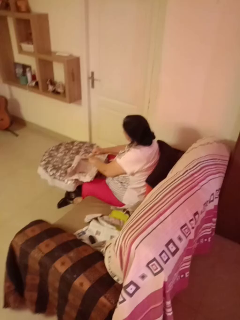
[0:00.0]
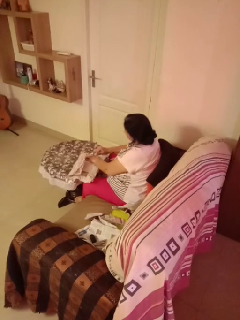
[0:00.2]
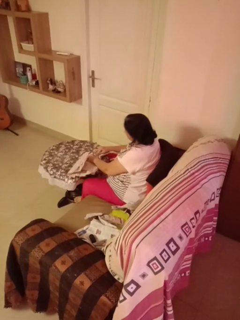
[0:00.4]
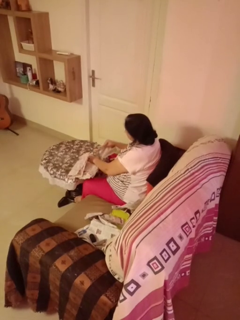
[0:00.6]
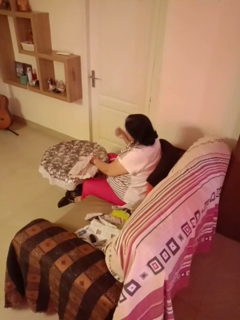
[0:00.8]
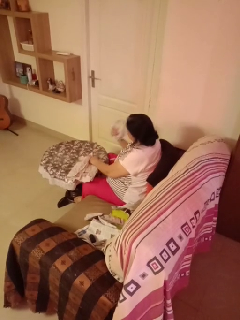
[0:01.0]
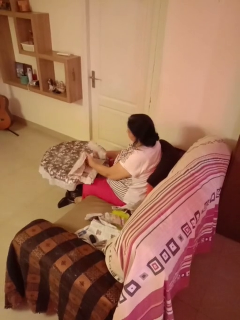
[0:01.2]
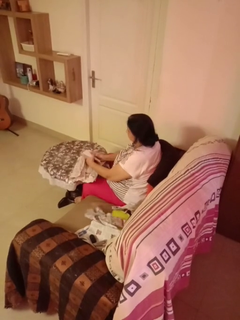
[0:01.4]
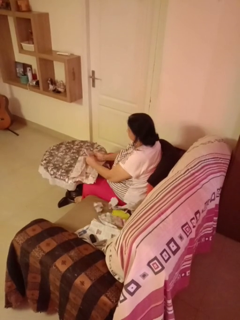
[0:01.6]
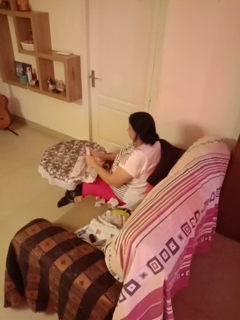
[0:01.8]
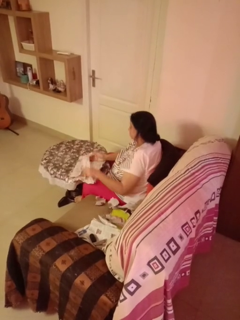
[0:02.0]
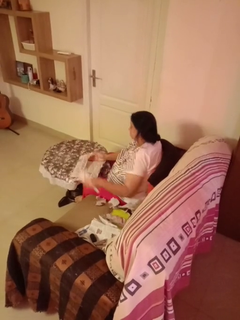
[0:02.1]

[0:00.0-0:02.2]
person tears paper

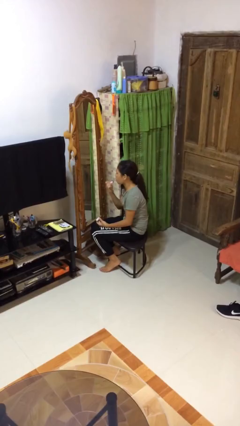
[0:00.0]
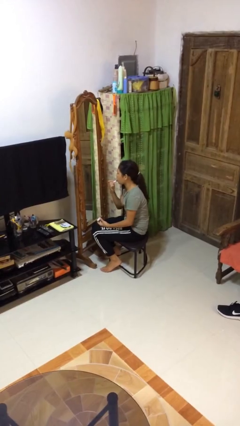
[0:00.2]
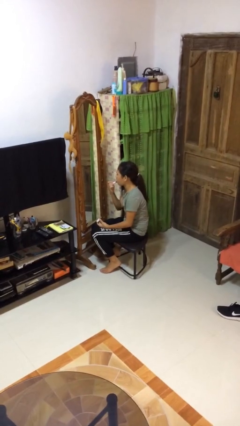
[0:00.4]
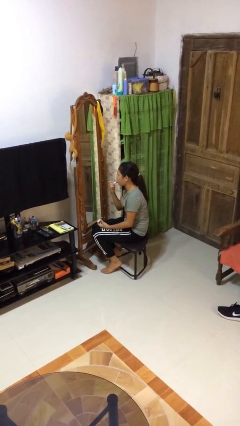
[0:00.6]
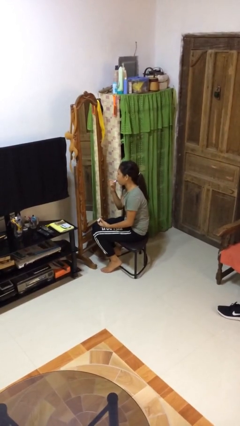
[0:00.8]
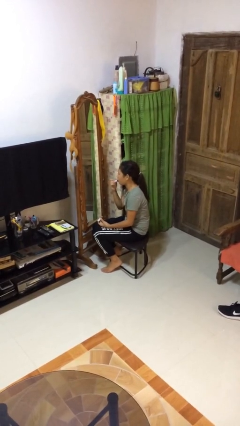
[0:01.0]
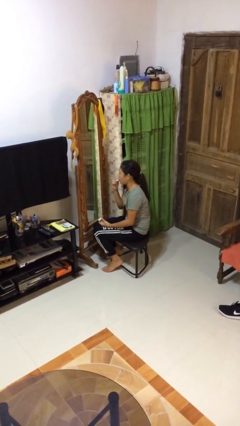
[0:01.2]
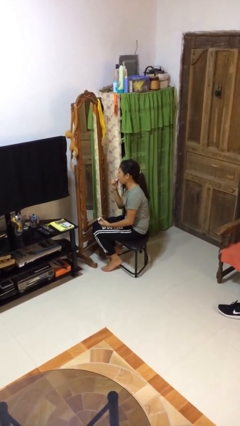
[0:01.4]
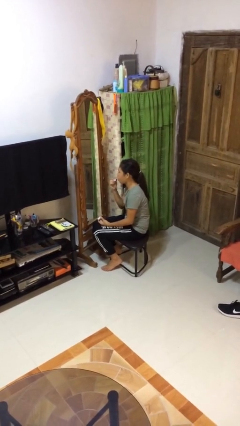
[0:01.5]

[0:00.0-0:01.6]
person applies lip makeup

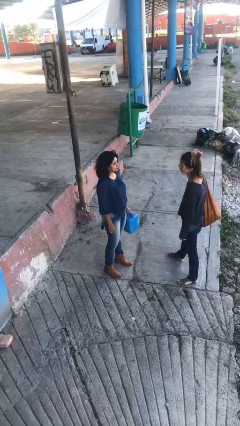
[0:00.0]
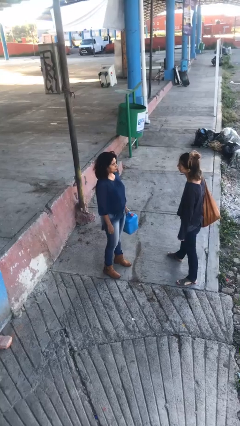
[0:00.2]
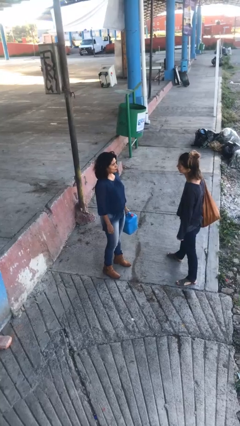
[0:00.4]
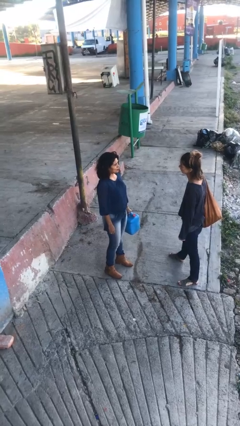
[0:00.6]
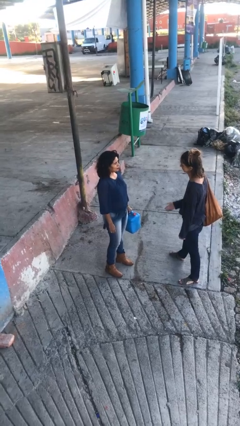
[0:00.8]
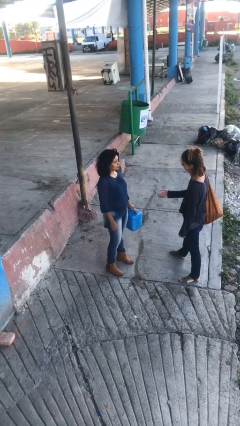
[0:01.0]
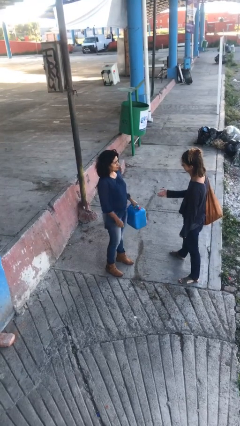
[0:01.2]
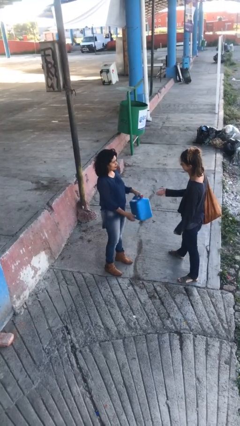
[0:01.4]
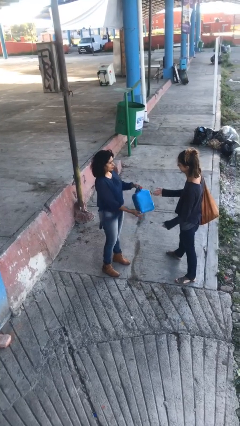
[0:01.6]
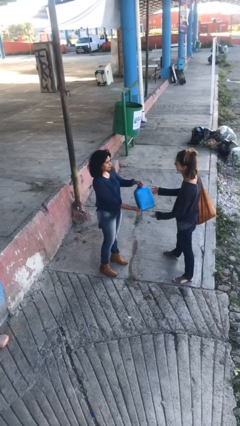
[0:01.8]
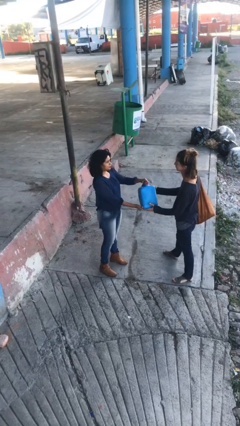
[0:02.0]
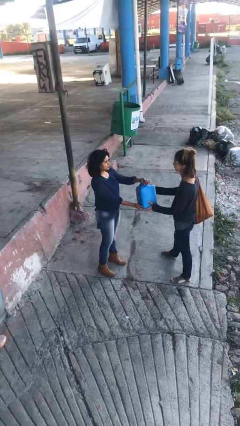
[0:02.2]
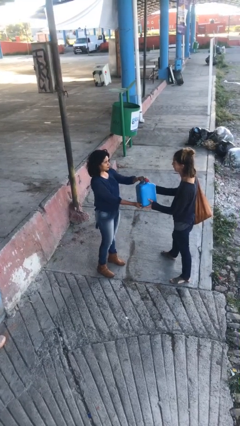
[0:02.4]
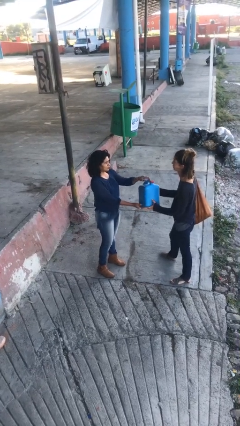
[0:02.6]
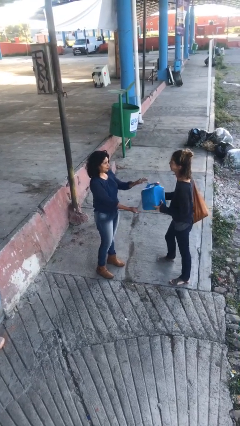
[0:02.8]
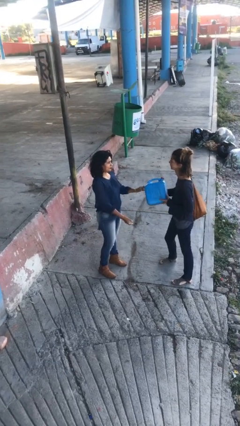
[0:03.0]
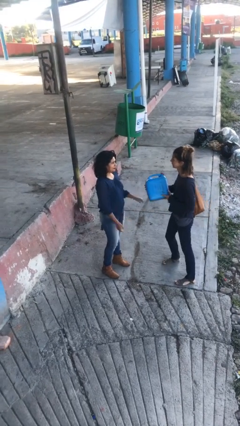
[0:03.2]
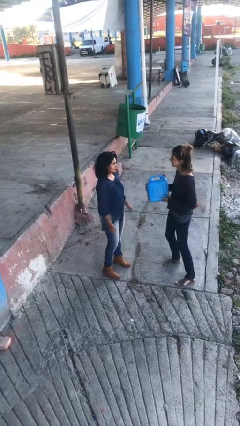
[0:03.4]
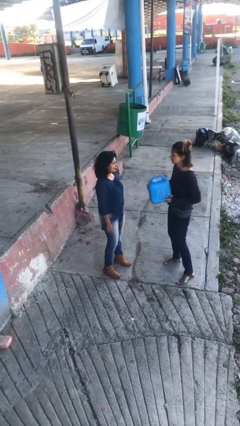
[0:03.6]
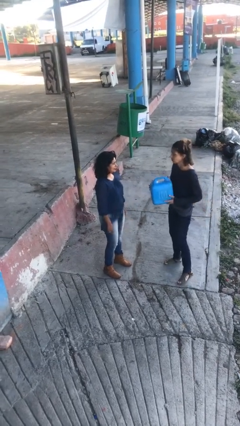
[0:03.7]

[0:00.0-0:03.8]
person transfers object to person

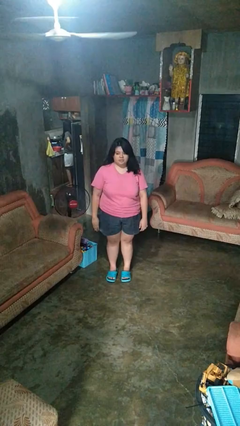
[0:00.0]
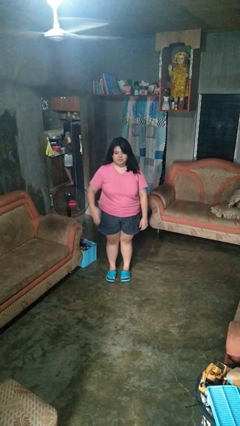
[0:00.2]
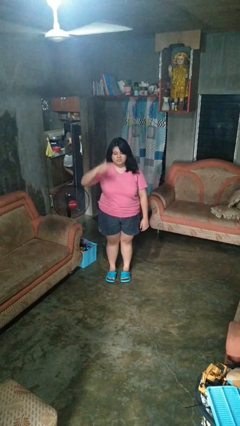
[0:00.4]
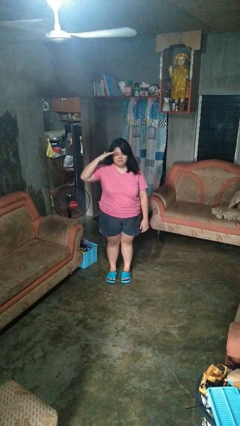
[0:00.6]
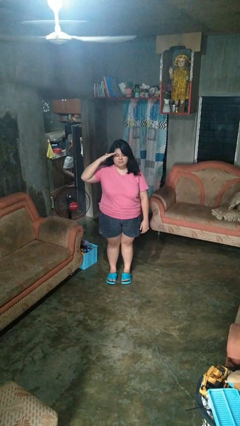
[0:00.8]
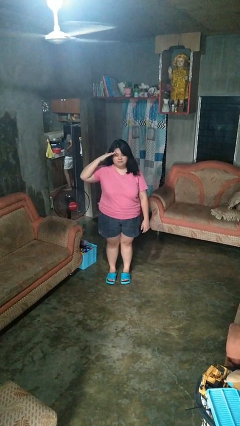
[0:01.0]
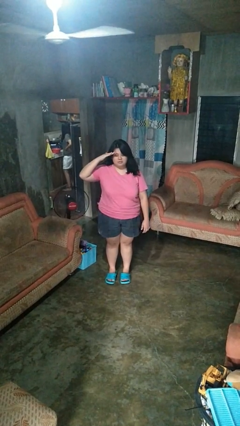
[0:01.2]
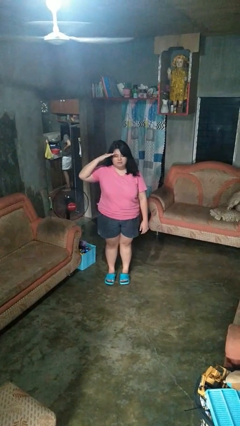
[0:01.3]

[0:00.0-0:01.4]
person salutes

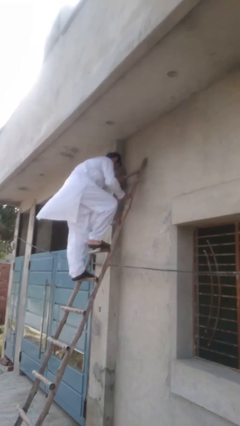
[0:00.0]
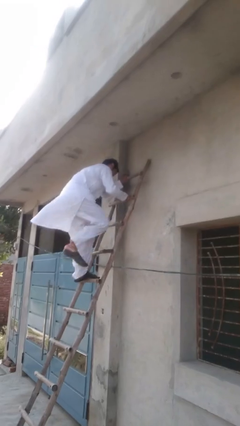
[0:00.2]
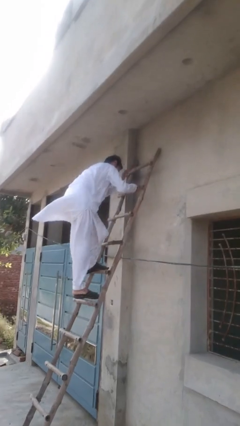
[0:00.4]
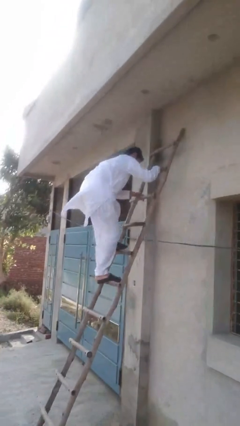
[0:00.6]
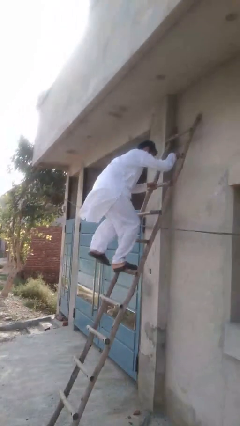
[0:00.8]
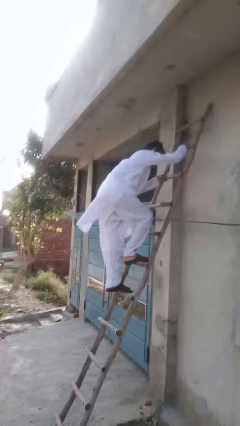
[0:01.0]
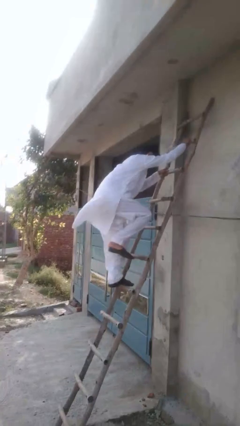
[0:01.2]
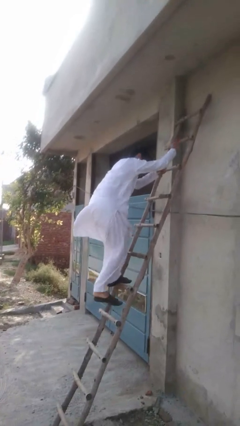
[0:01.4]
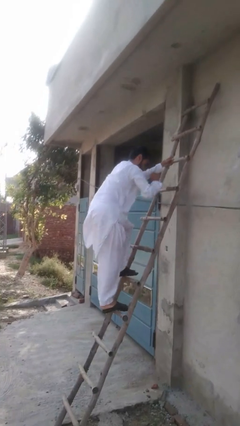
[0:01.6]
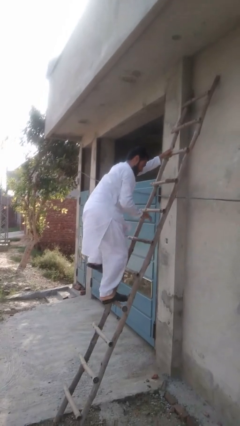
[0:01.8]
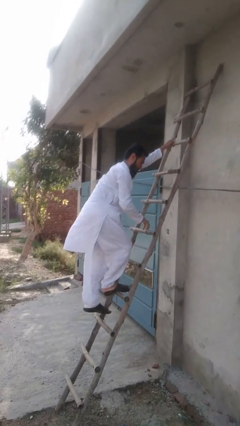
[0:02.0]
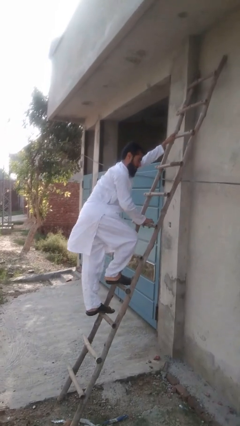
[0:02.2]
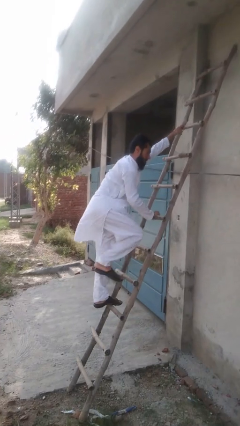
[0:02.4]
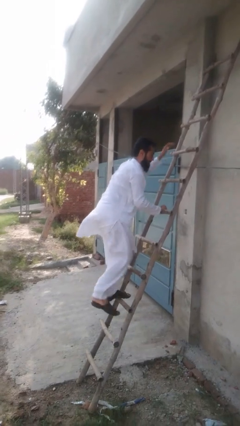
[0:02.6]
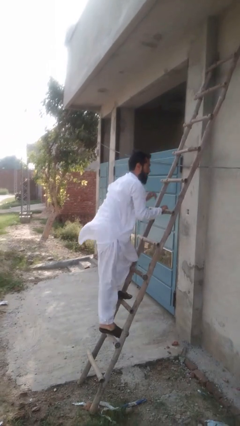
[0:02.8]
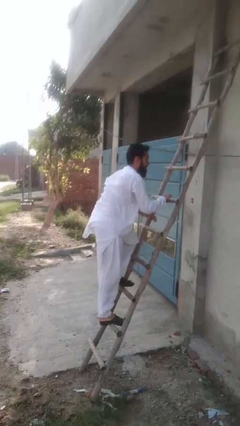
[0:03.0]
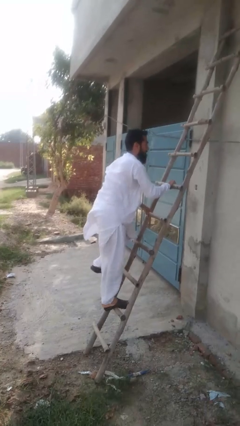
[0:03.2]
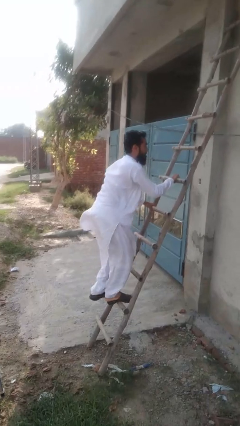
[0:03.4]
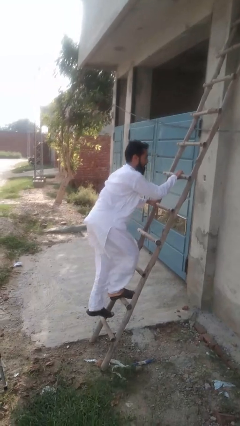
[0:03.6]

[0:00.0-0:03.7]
person climbs down stairs

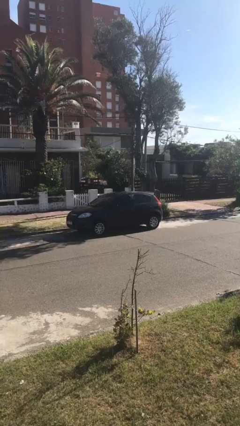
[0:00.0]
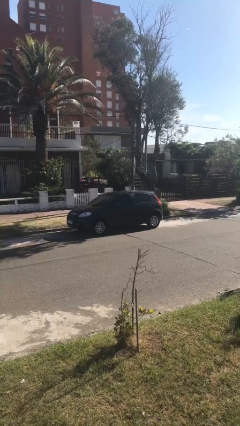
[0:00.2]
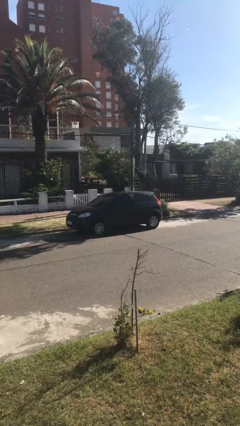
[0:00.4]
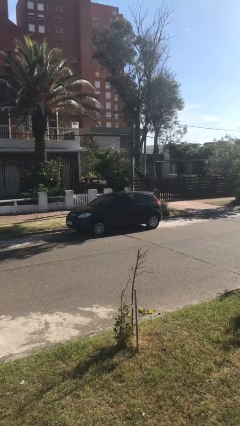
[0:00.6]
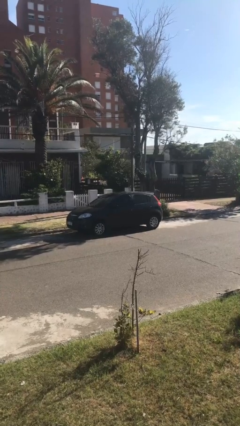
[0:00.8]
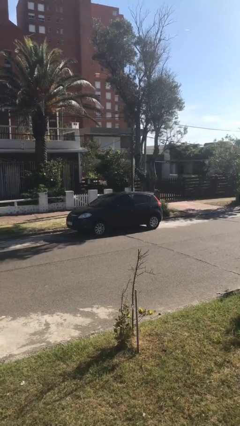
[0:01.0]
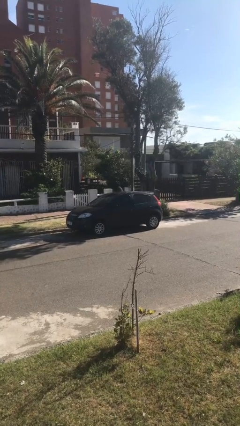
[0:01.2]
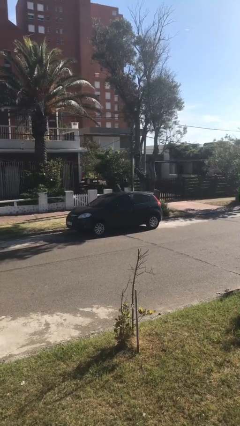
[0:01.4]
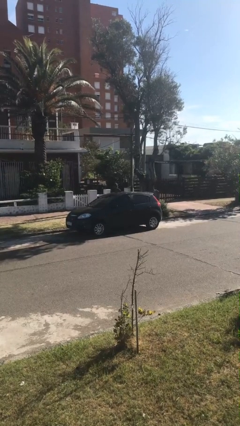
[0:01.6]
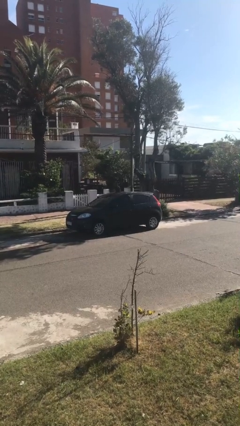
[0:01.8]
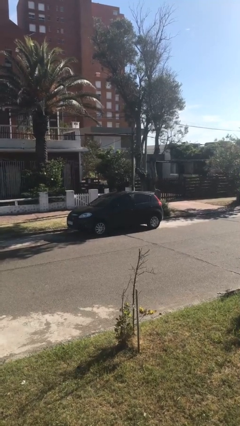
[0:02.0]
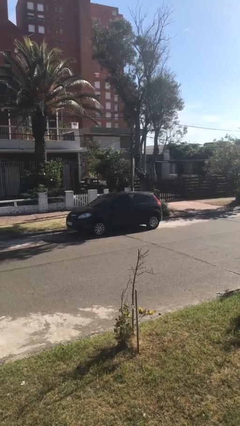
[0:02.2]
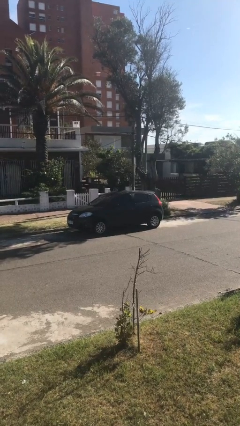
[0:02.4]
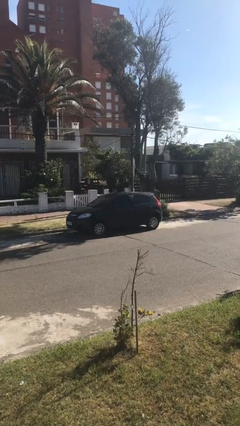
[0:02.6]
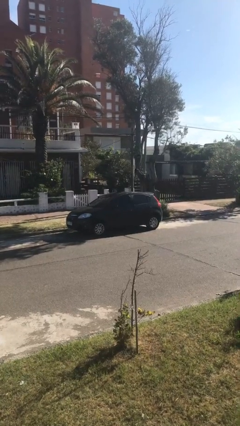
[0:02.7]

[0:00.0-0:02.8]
car drops off person

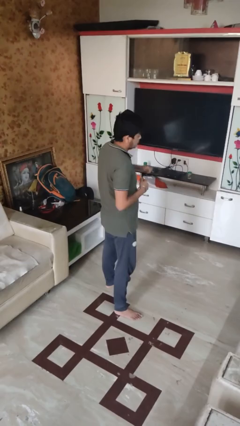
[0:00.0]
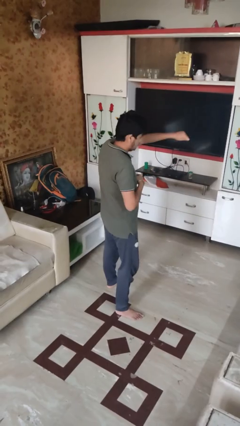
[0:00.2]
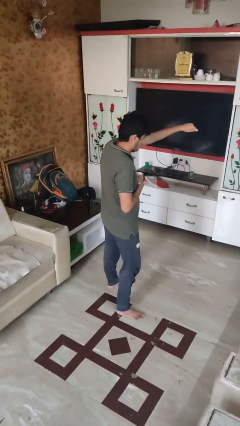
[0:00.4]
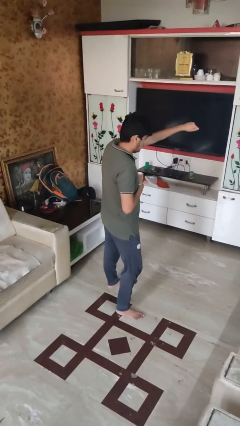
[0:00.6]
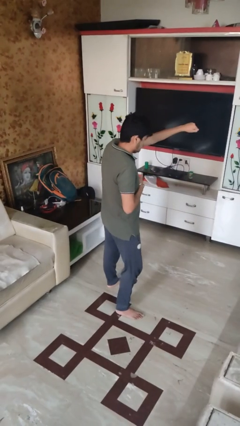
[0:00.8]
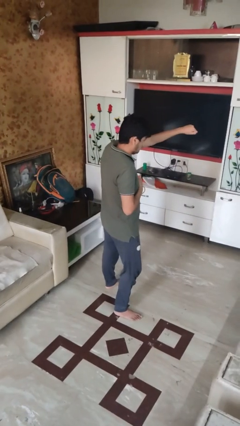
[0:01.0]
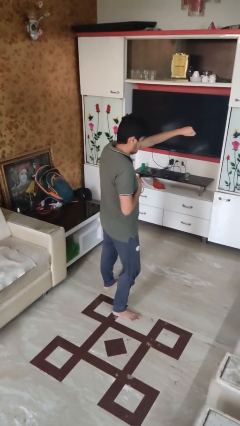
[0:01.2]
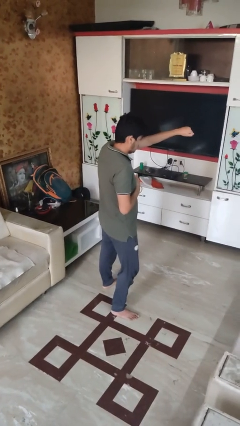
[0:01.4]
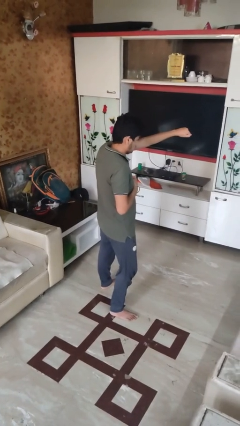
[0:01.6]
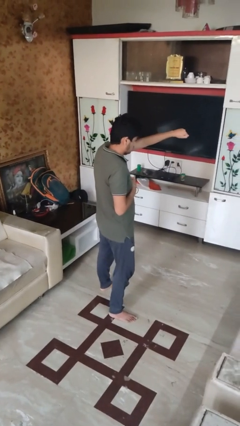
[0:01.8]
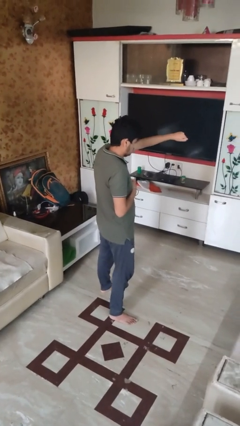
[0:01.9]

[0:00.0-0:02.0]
person punches

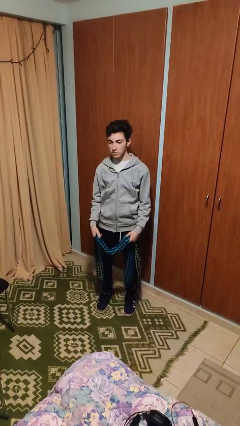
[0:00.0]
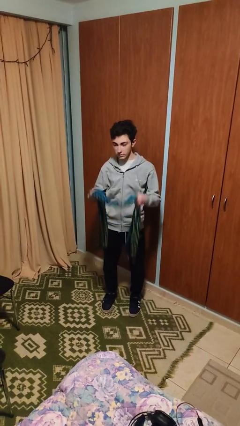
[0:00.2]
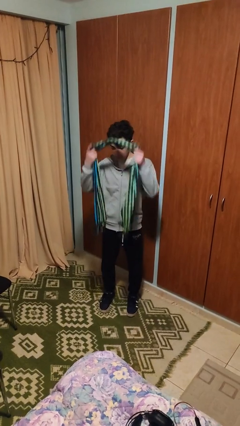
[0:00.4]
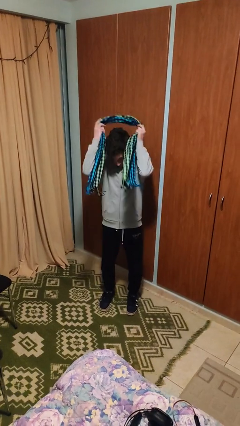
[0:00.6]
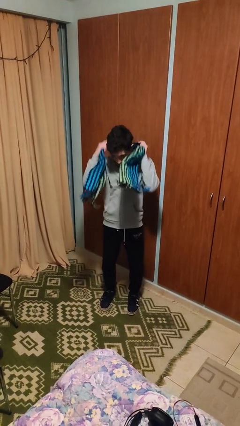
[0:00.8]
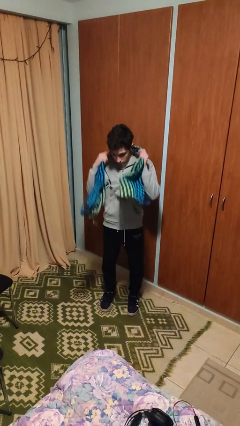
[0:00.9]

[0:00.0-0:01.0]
person puts on scarf
